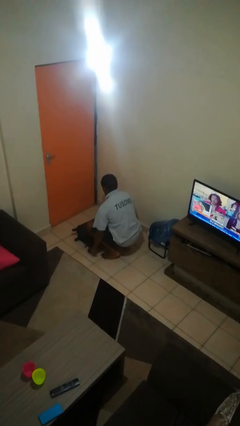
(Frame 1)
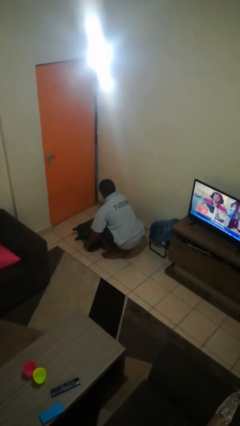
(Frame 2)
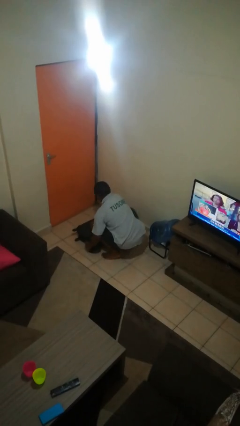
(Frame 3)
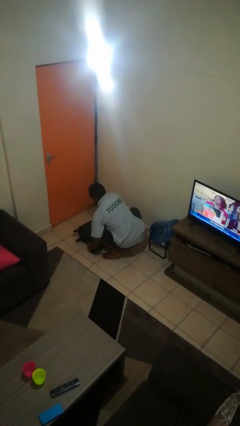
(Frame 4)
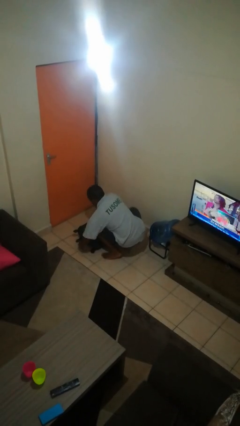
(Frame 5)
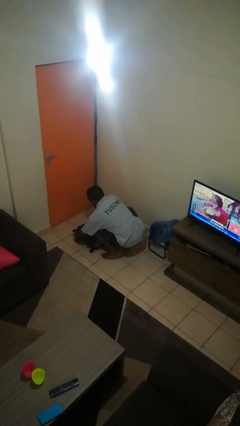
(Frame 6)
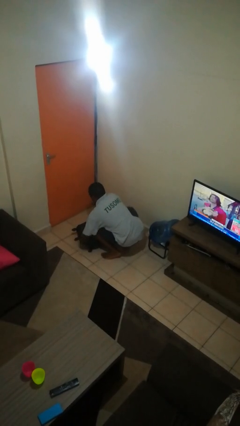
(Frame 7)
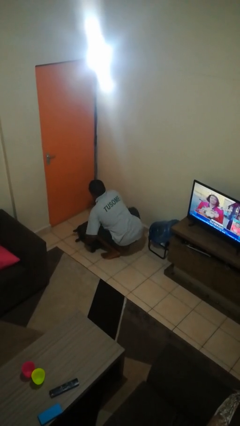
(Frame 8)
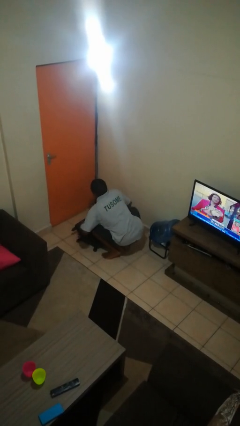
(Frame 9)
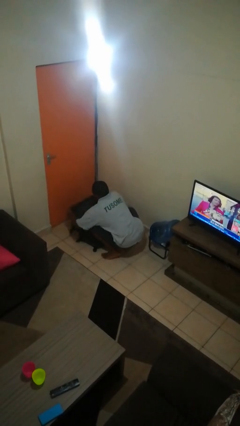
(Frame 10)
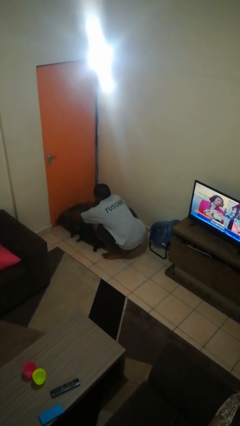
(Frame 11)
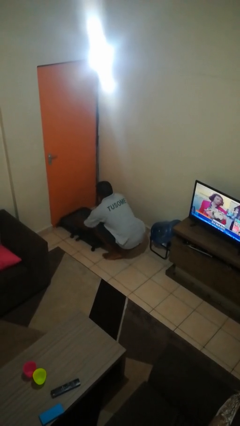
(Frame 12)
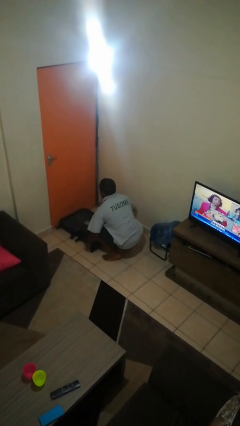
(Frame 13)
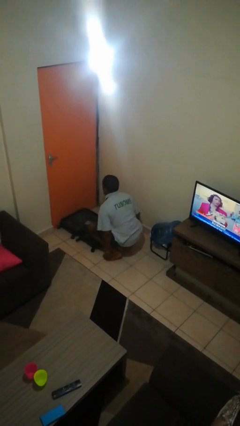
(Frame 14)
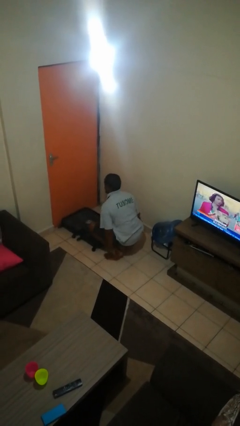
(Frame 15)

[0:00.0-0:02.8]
person opens suitcase

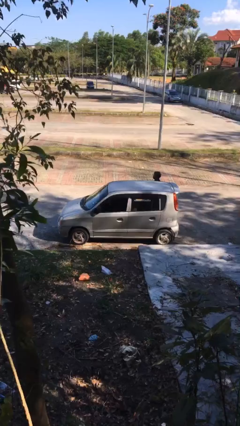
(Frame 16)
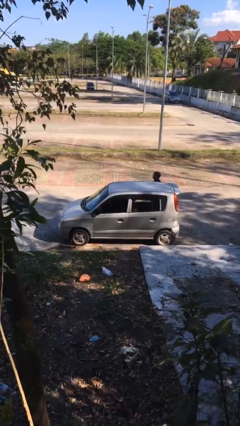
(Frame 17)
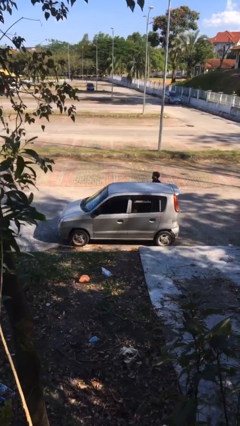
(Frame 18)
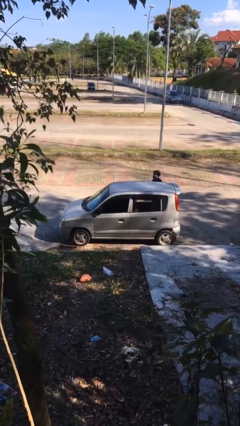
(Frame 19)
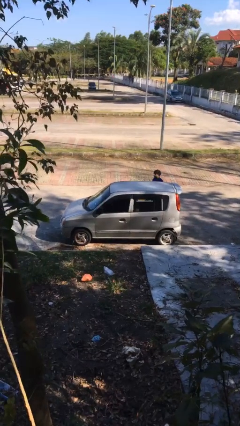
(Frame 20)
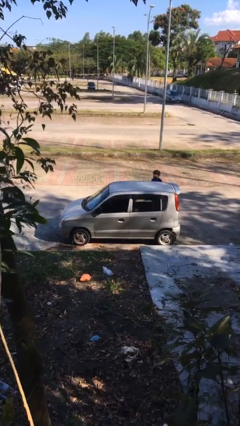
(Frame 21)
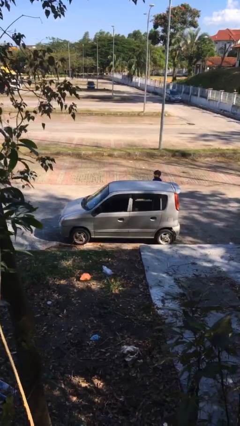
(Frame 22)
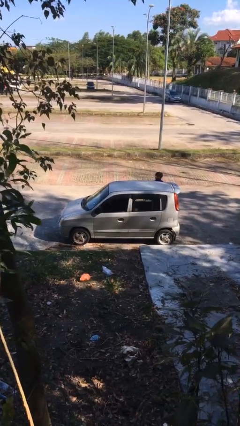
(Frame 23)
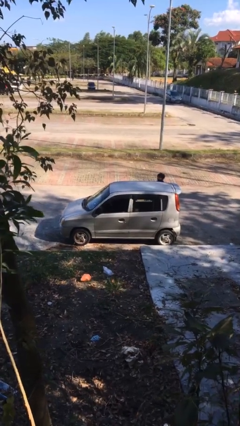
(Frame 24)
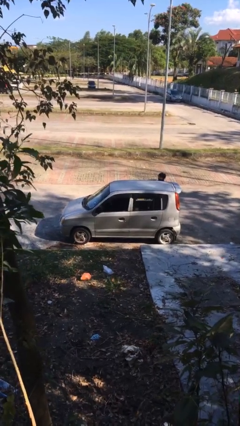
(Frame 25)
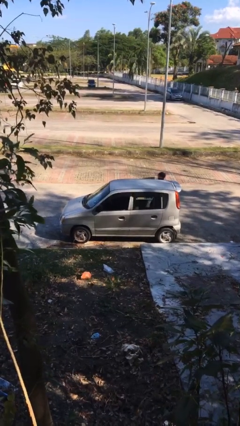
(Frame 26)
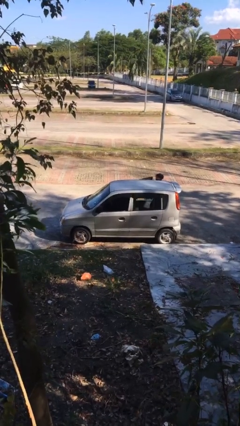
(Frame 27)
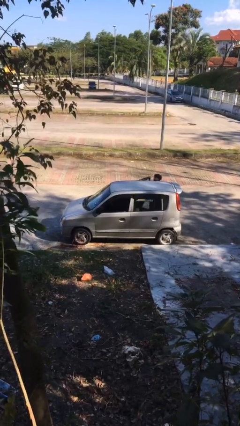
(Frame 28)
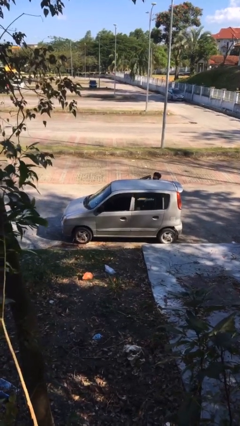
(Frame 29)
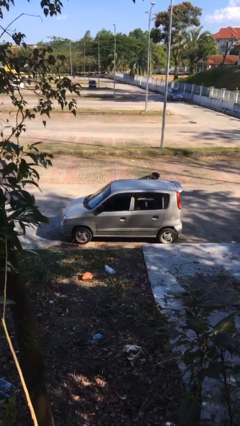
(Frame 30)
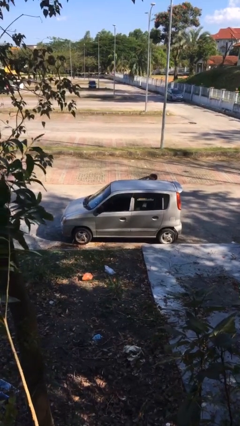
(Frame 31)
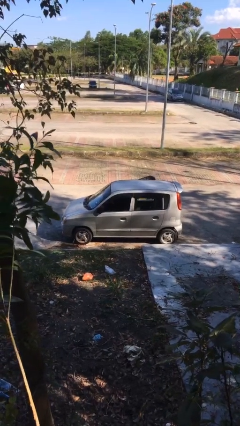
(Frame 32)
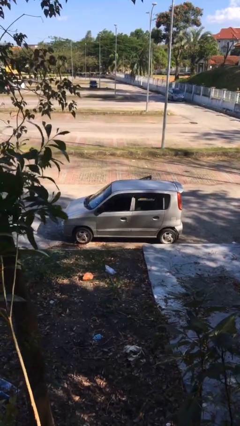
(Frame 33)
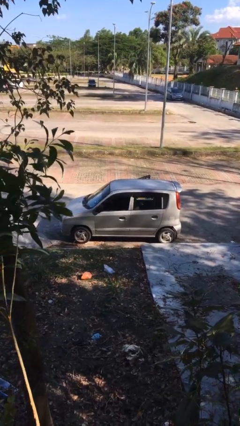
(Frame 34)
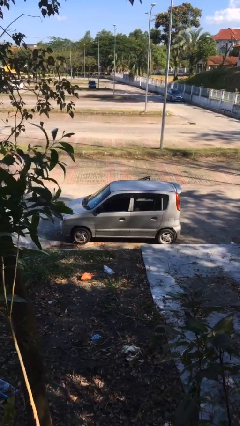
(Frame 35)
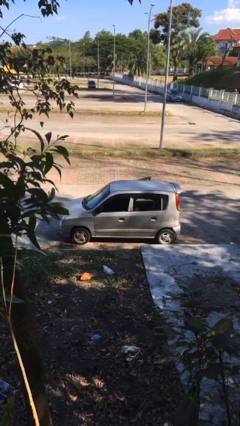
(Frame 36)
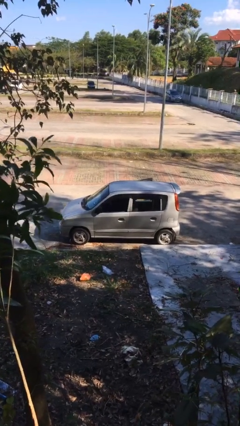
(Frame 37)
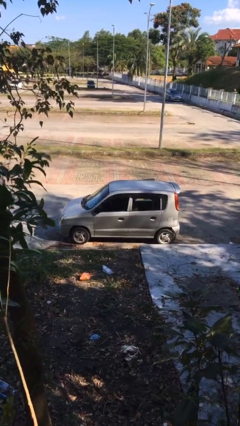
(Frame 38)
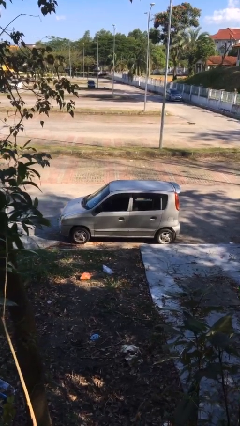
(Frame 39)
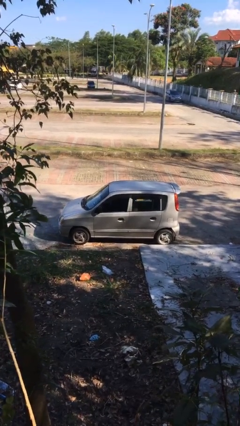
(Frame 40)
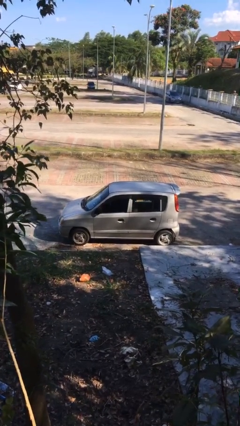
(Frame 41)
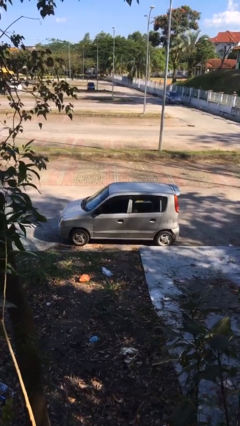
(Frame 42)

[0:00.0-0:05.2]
car picks up person

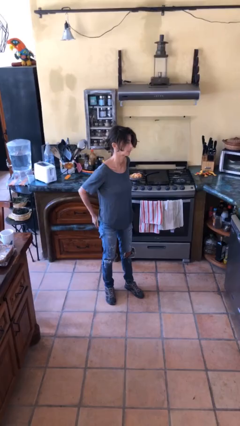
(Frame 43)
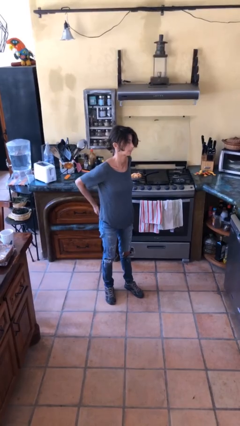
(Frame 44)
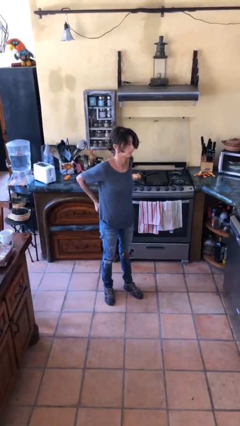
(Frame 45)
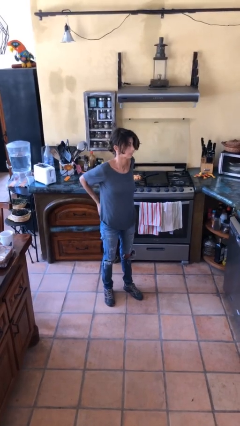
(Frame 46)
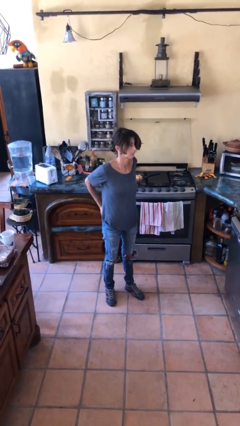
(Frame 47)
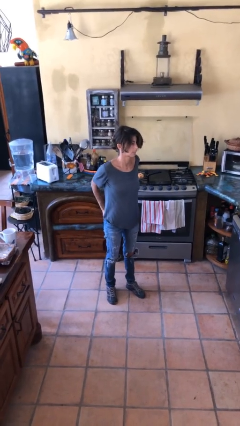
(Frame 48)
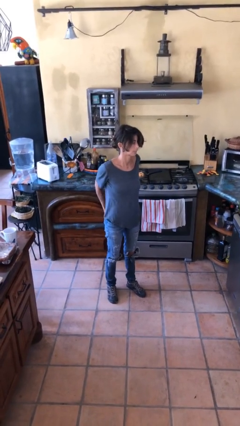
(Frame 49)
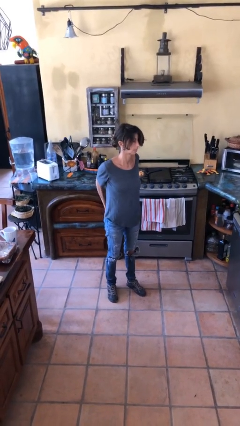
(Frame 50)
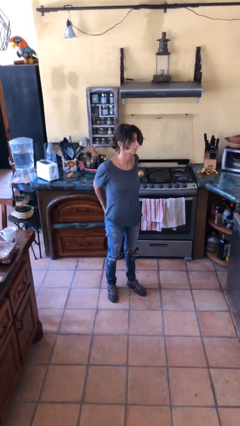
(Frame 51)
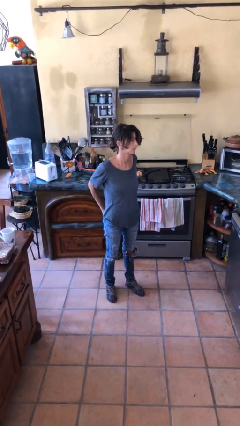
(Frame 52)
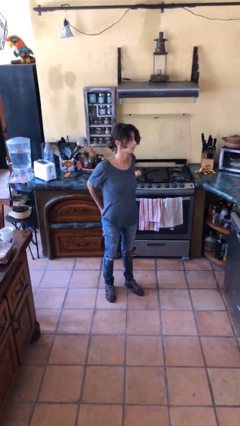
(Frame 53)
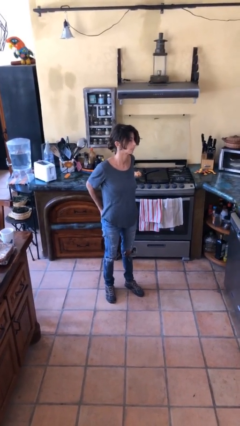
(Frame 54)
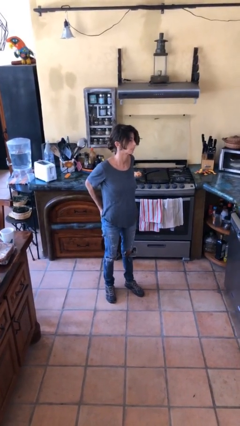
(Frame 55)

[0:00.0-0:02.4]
person puts hands in back pockets

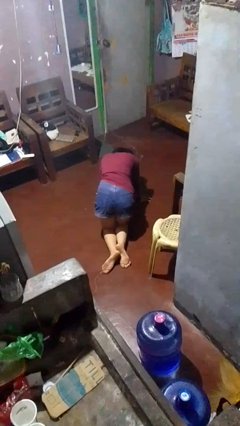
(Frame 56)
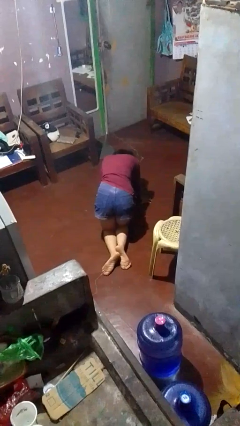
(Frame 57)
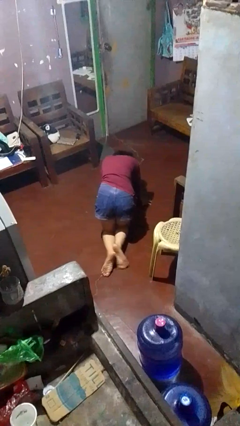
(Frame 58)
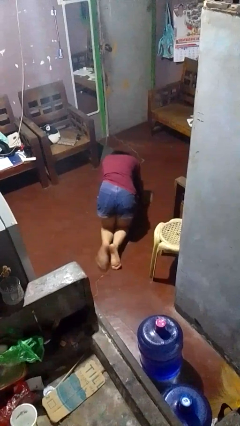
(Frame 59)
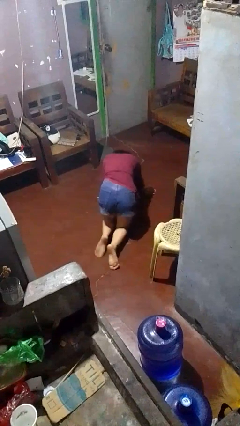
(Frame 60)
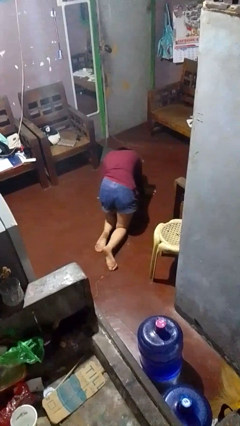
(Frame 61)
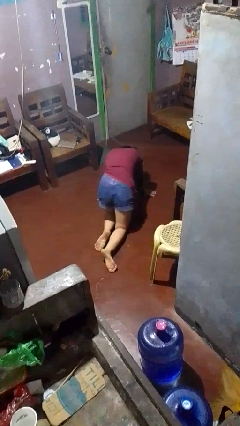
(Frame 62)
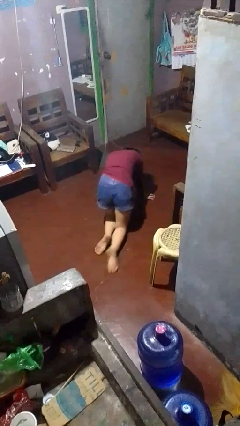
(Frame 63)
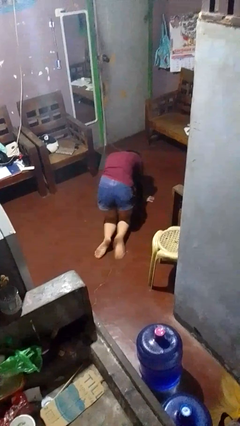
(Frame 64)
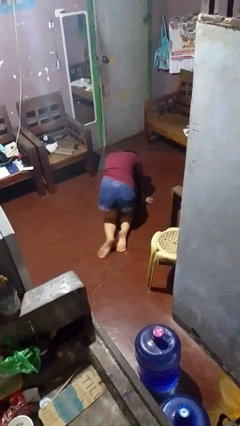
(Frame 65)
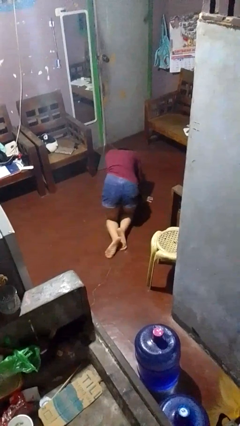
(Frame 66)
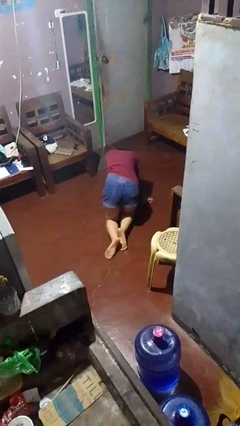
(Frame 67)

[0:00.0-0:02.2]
person crawls

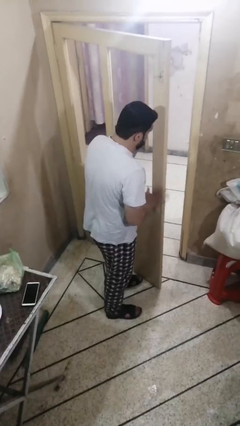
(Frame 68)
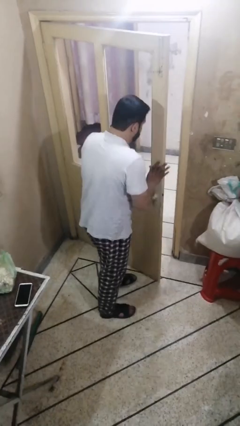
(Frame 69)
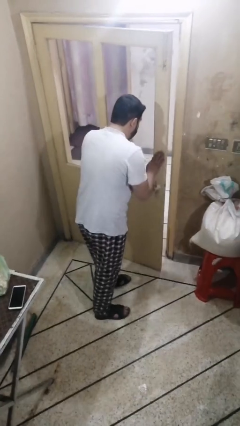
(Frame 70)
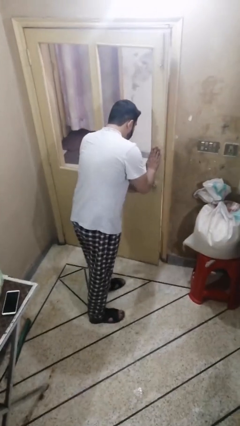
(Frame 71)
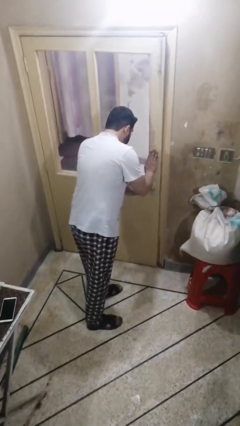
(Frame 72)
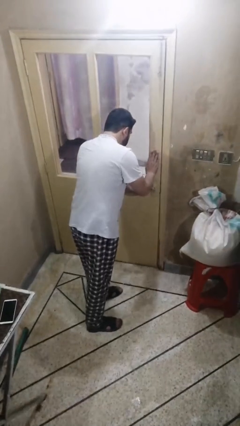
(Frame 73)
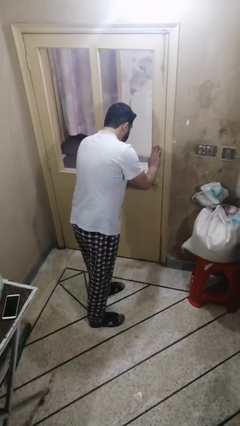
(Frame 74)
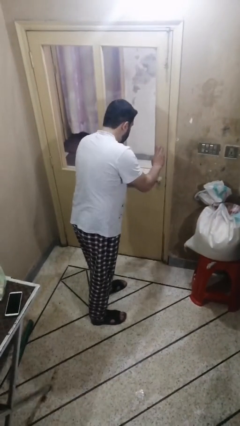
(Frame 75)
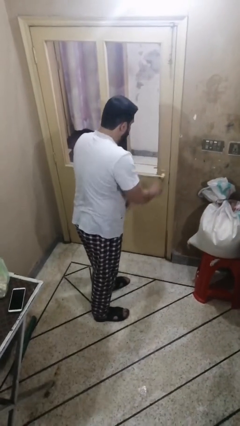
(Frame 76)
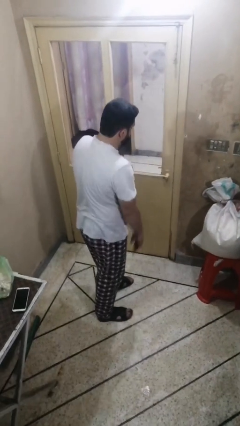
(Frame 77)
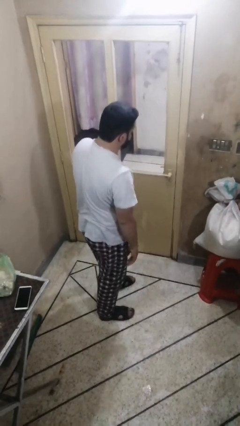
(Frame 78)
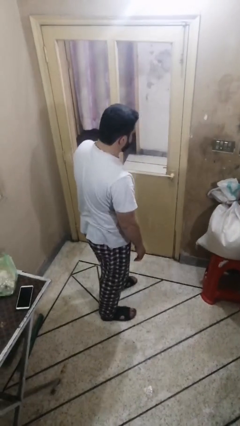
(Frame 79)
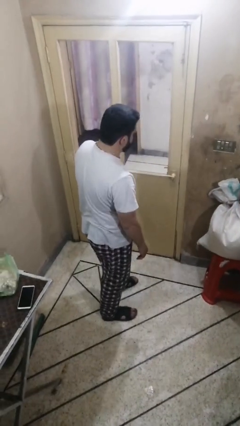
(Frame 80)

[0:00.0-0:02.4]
person closes facility door

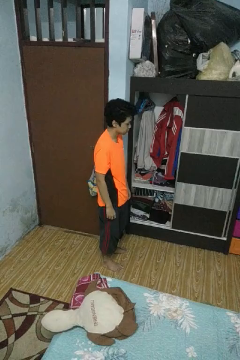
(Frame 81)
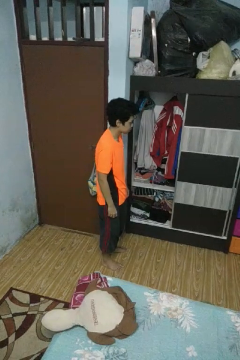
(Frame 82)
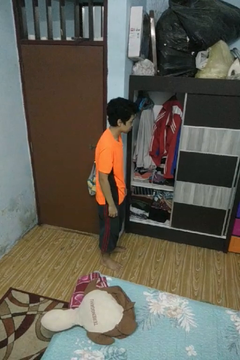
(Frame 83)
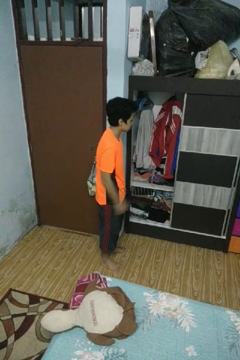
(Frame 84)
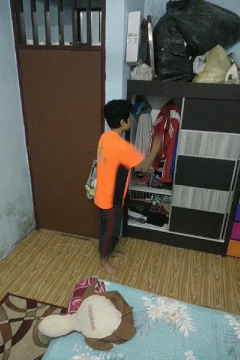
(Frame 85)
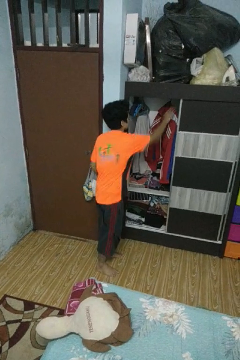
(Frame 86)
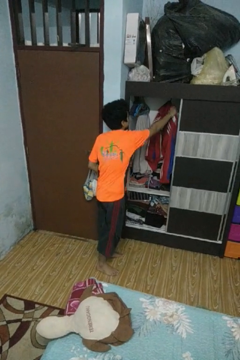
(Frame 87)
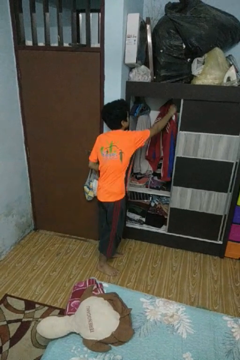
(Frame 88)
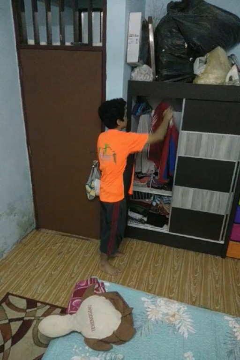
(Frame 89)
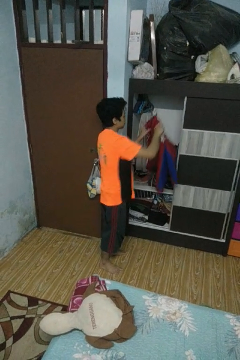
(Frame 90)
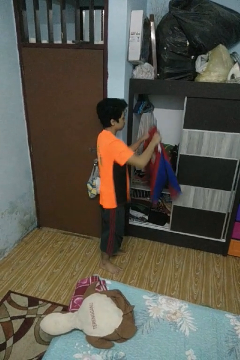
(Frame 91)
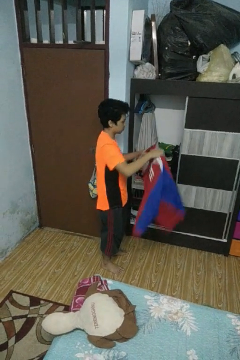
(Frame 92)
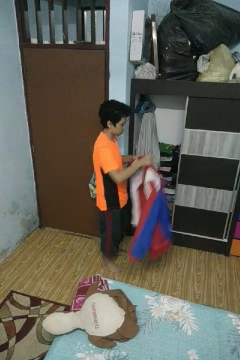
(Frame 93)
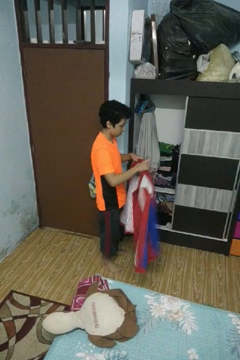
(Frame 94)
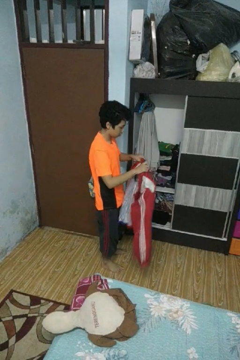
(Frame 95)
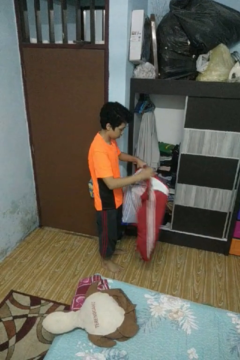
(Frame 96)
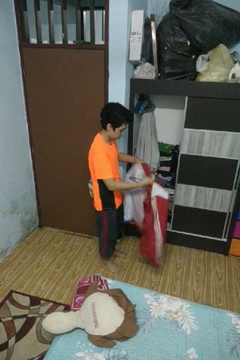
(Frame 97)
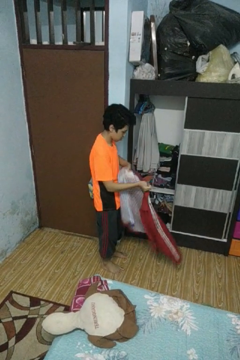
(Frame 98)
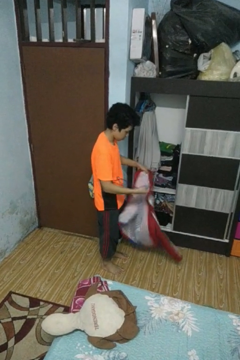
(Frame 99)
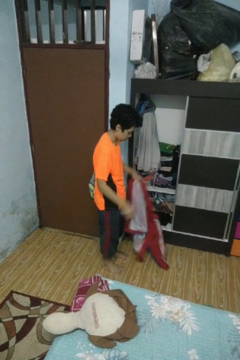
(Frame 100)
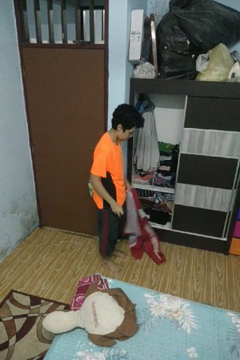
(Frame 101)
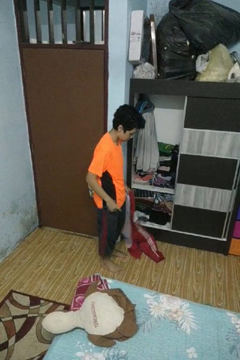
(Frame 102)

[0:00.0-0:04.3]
person takes clothes from closet
